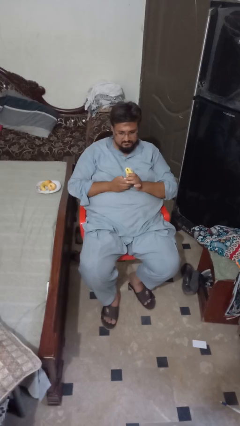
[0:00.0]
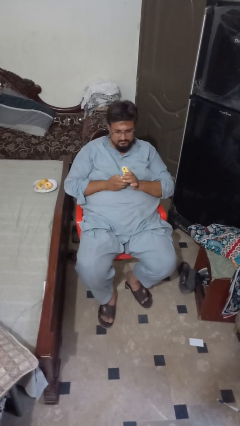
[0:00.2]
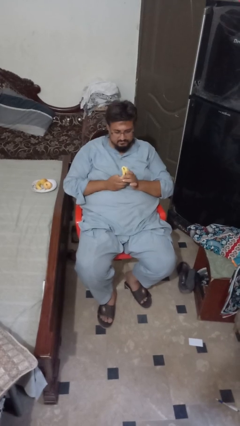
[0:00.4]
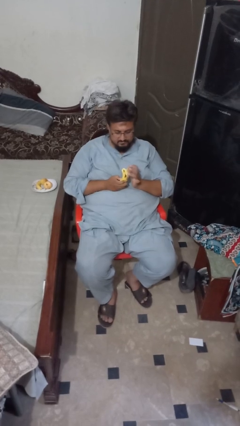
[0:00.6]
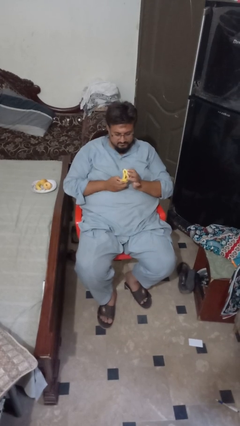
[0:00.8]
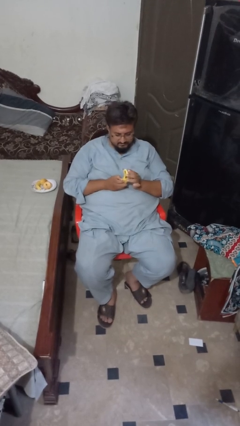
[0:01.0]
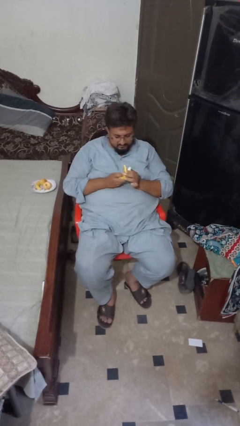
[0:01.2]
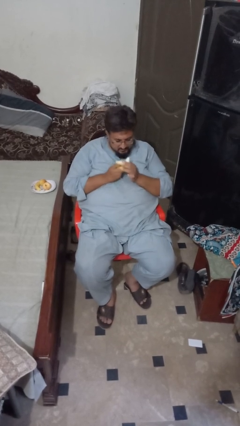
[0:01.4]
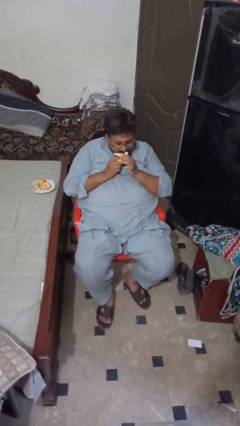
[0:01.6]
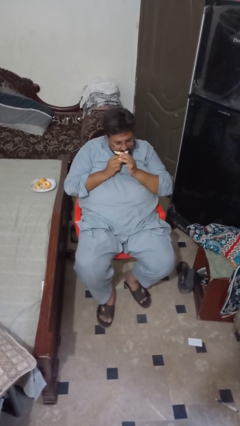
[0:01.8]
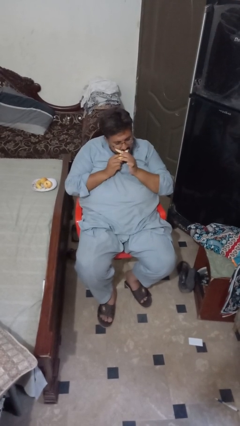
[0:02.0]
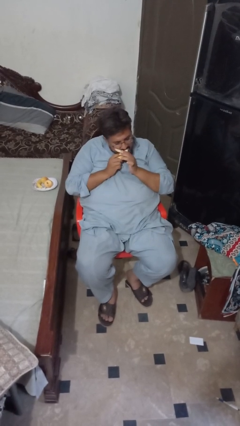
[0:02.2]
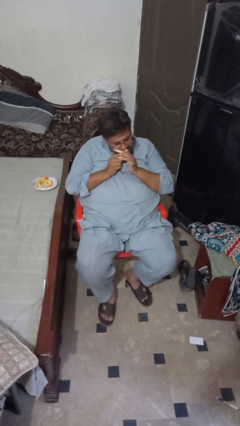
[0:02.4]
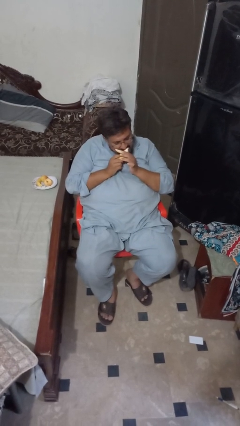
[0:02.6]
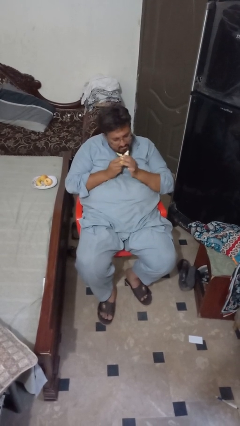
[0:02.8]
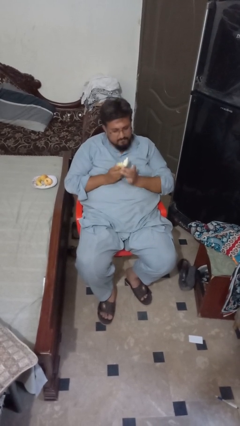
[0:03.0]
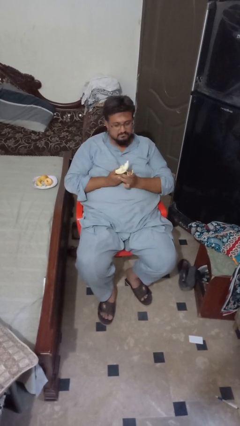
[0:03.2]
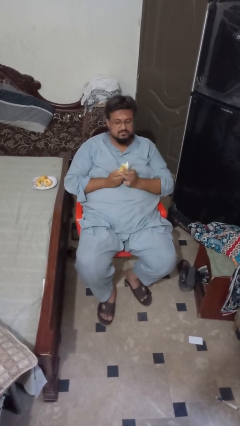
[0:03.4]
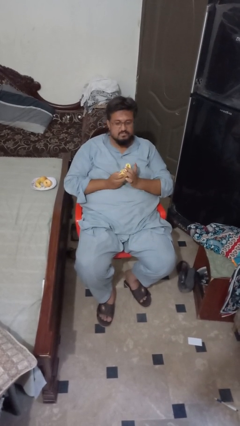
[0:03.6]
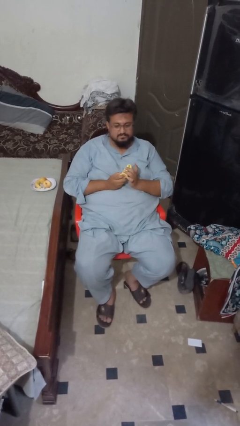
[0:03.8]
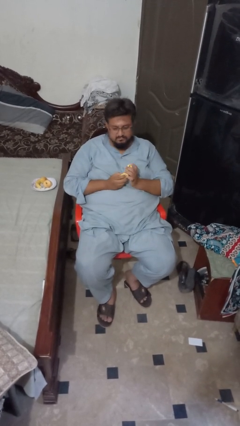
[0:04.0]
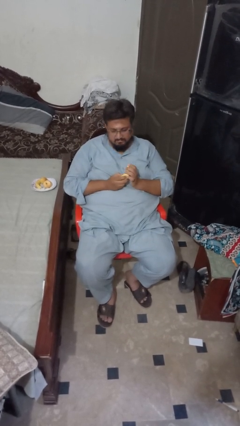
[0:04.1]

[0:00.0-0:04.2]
person eats banana

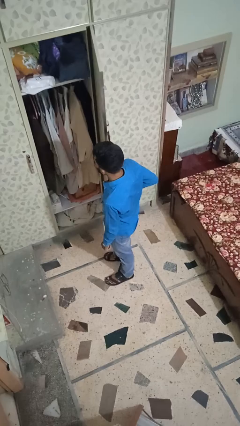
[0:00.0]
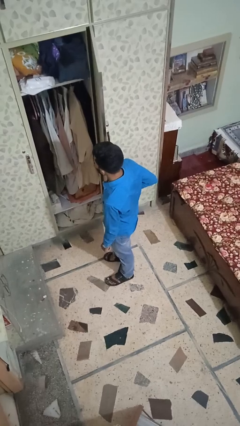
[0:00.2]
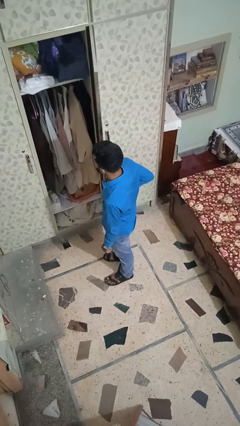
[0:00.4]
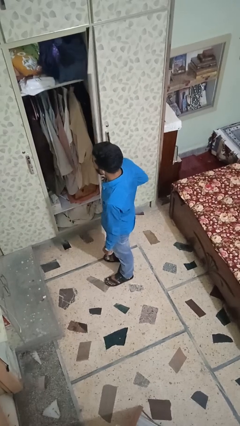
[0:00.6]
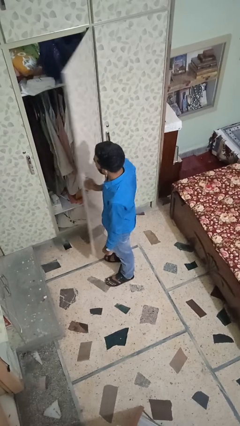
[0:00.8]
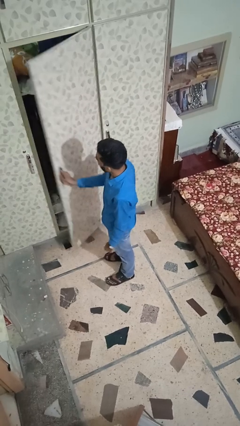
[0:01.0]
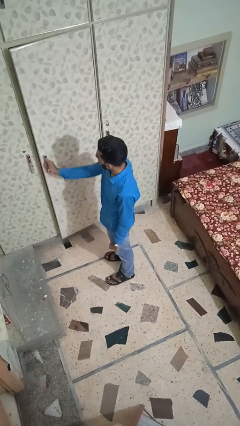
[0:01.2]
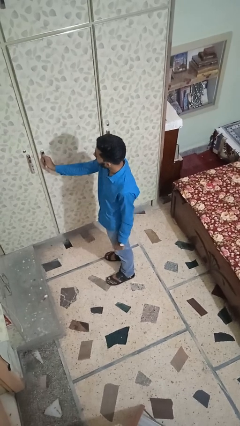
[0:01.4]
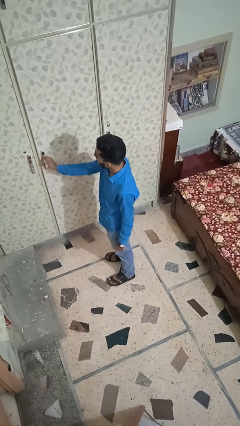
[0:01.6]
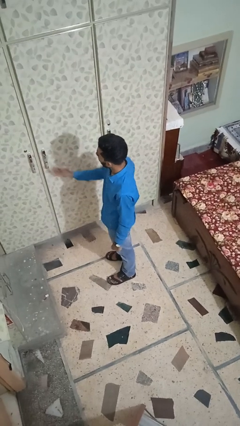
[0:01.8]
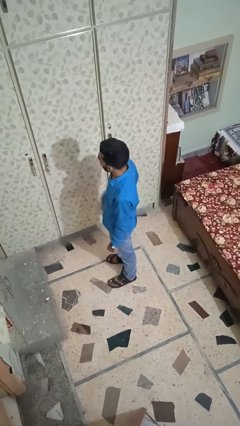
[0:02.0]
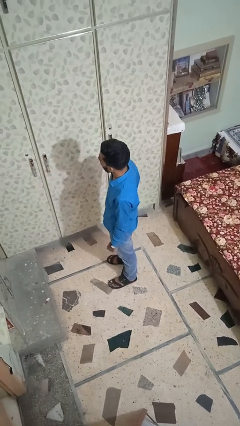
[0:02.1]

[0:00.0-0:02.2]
person closes closet door

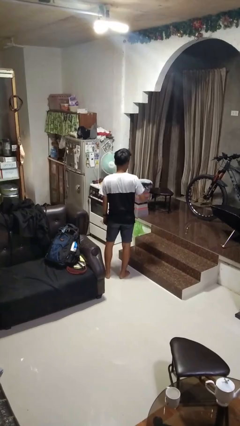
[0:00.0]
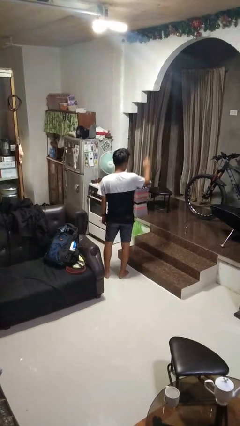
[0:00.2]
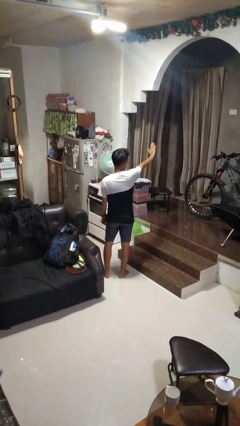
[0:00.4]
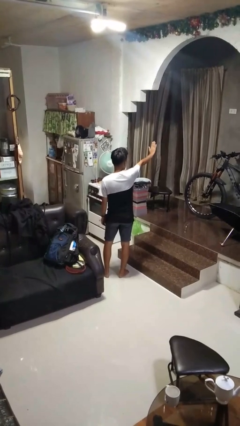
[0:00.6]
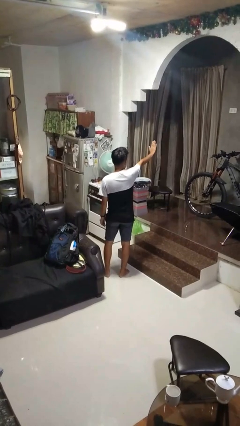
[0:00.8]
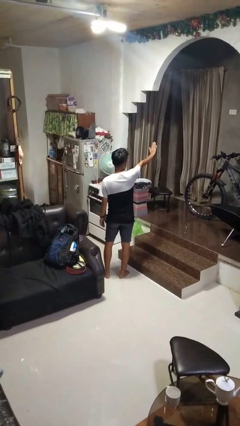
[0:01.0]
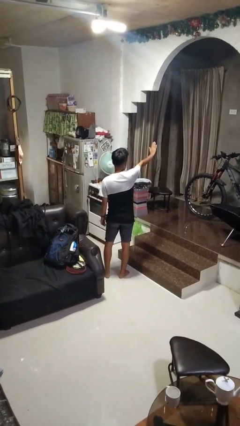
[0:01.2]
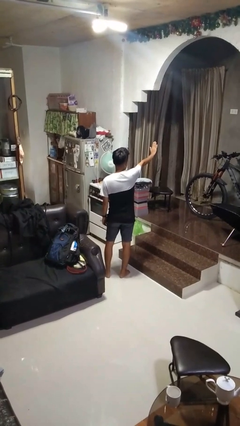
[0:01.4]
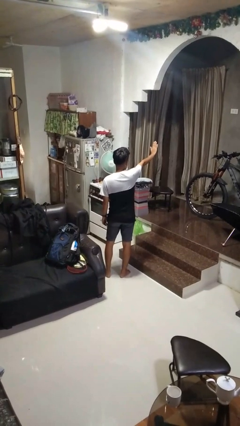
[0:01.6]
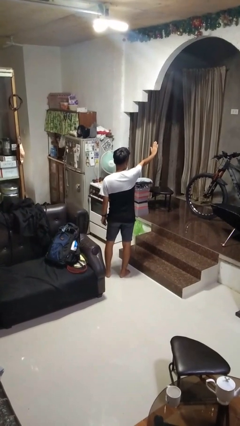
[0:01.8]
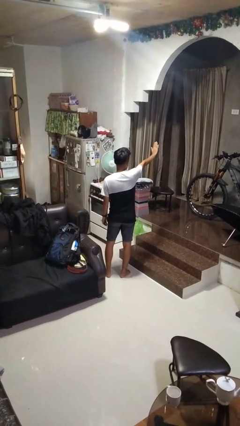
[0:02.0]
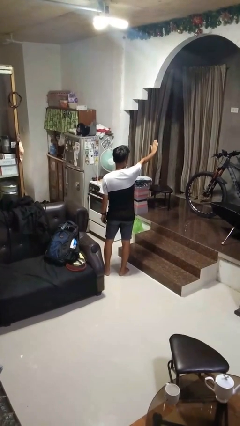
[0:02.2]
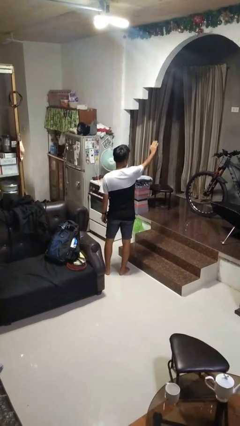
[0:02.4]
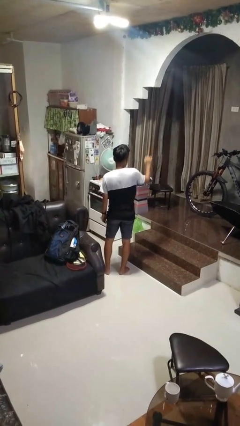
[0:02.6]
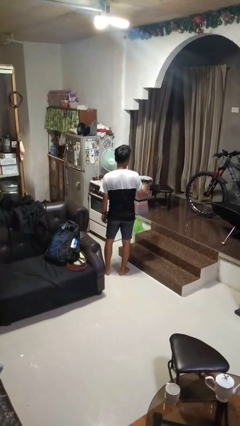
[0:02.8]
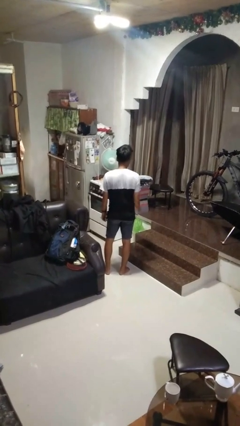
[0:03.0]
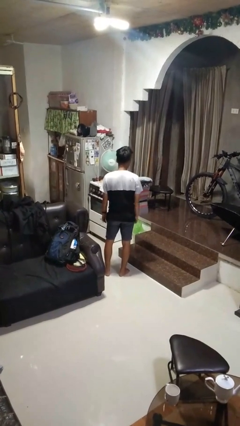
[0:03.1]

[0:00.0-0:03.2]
person gestures stop

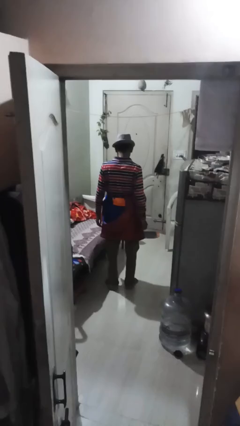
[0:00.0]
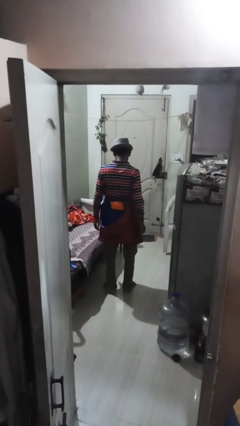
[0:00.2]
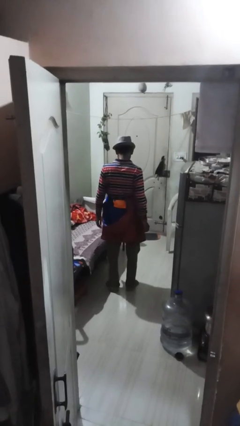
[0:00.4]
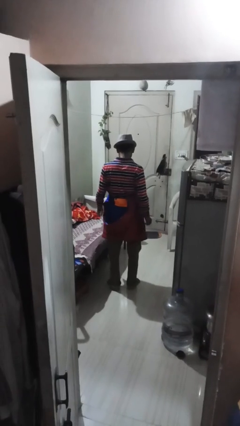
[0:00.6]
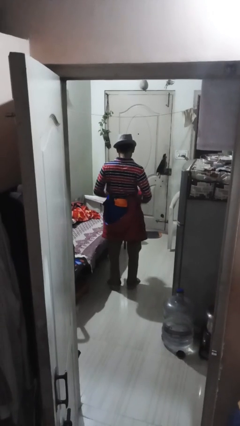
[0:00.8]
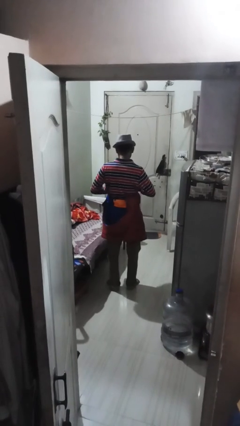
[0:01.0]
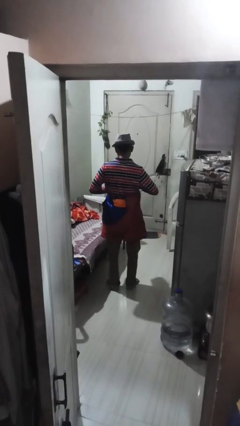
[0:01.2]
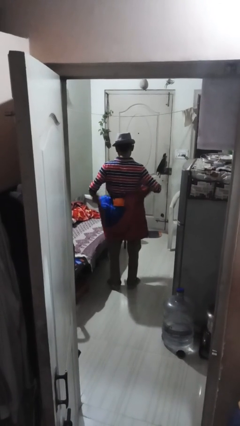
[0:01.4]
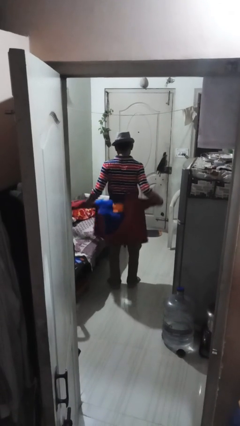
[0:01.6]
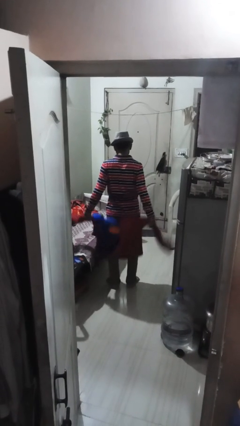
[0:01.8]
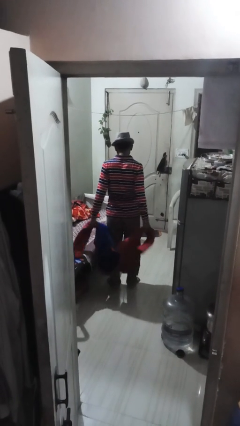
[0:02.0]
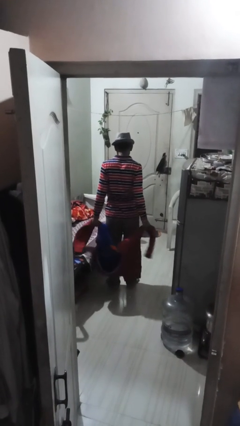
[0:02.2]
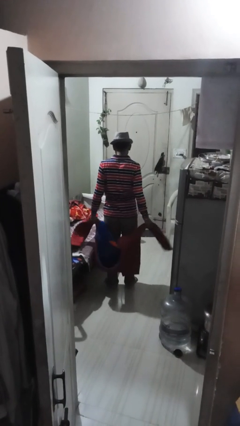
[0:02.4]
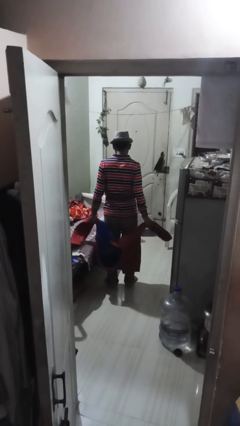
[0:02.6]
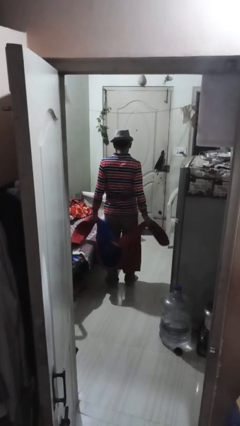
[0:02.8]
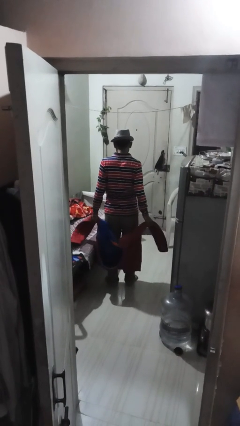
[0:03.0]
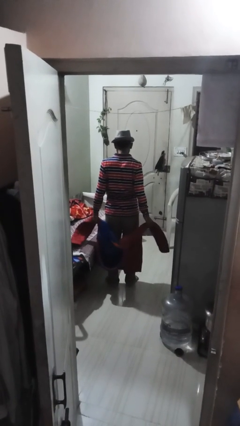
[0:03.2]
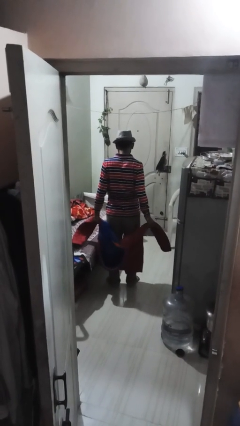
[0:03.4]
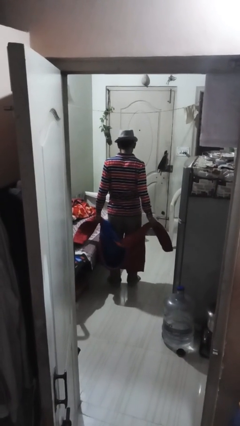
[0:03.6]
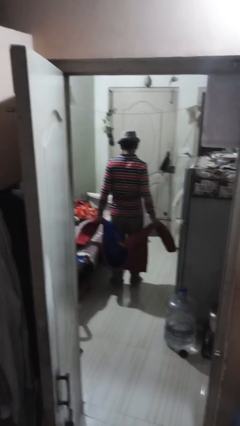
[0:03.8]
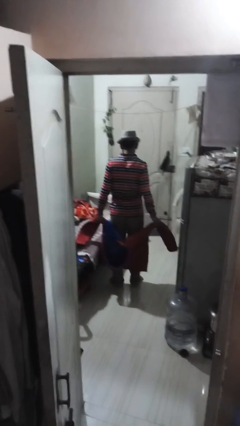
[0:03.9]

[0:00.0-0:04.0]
person unties jacket around waist

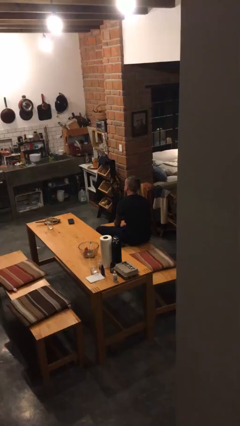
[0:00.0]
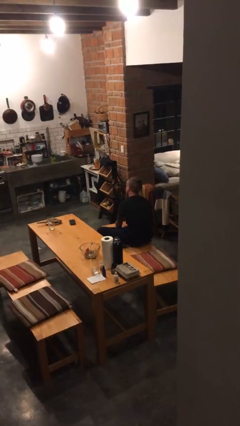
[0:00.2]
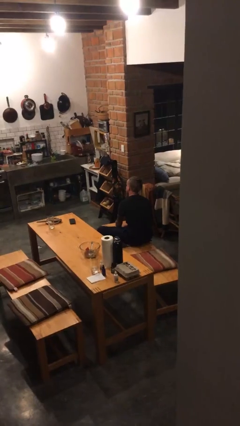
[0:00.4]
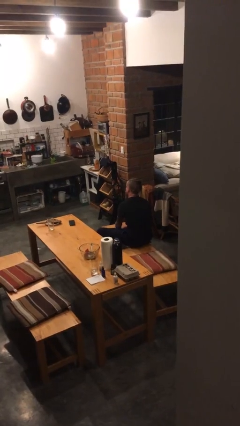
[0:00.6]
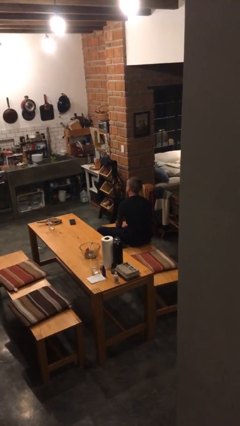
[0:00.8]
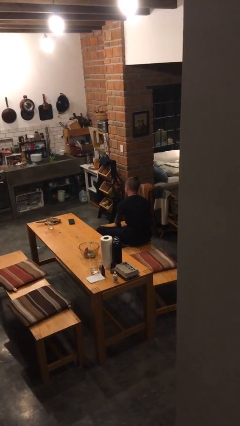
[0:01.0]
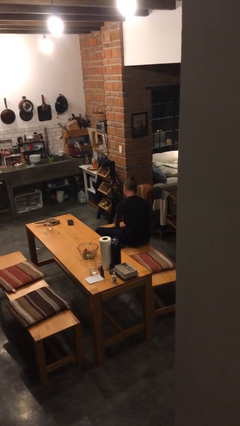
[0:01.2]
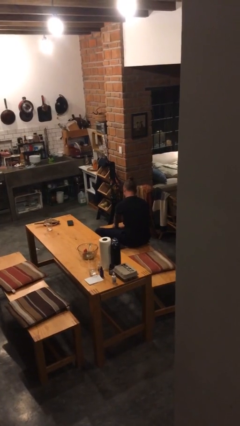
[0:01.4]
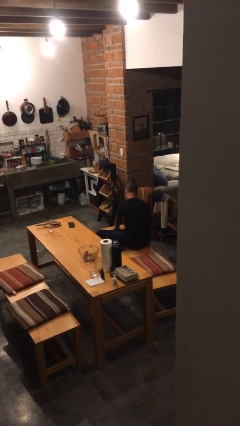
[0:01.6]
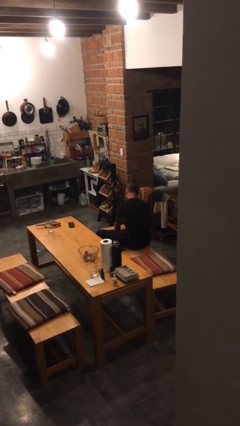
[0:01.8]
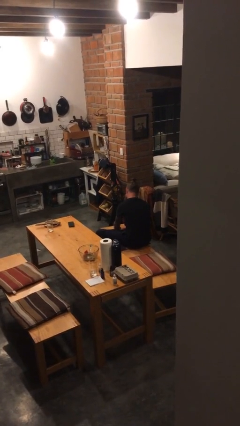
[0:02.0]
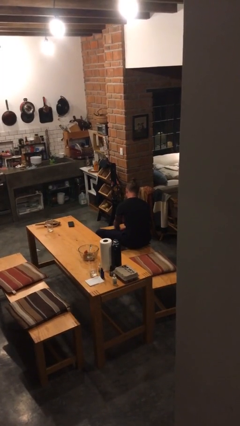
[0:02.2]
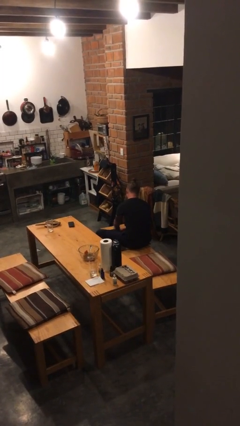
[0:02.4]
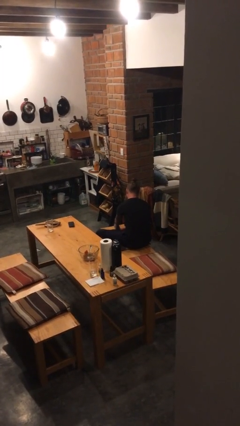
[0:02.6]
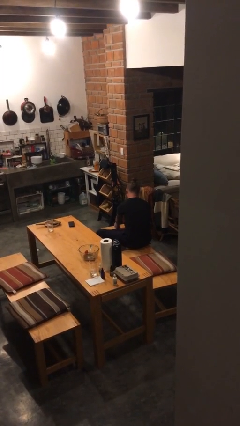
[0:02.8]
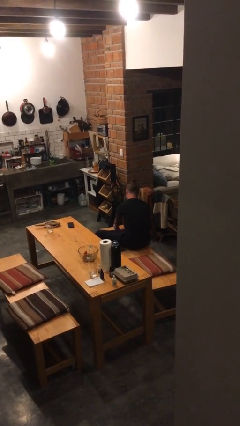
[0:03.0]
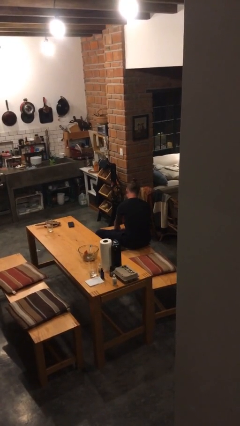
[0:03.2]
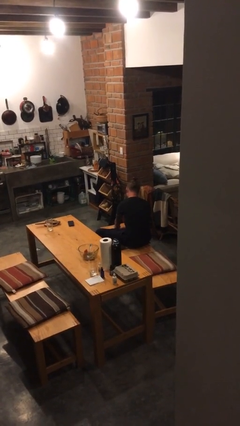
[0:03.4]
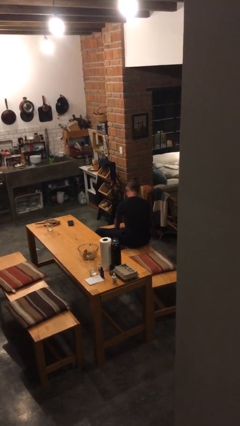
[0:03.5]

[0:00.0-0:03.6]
person rubs foot

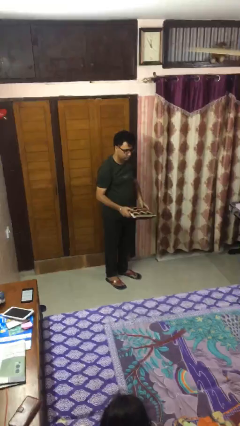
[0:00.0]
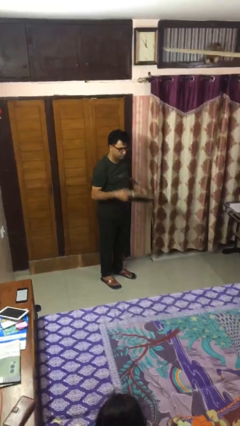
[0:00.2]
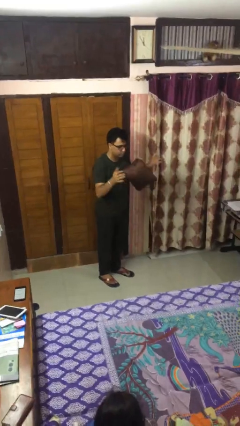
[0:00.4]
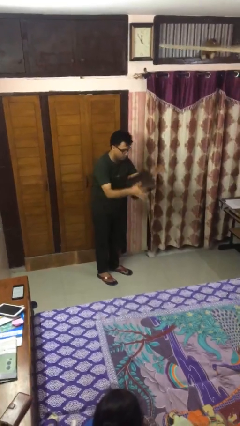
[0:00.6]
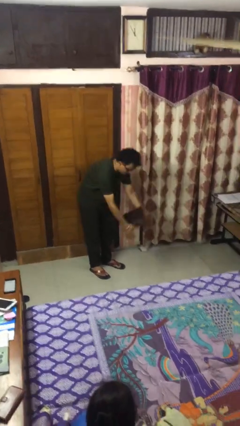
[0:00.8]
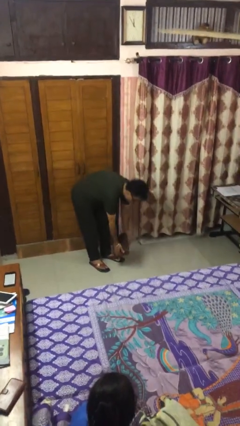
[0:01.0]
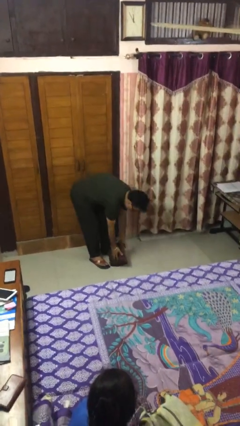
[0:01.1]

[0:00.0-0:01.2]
person drops object
